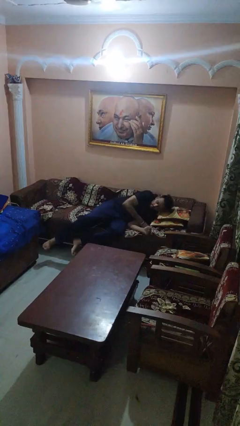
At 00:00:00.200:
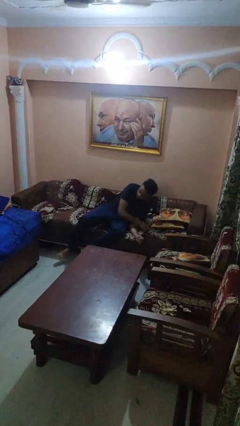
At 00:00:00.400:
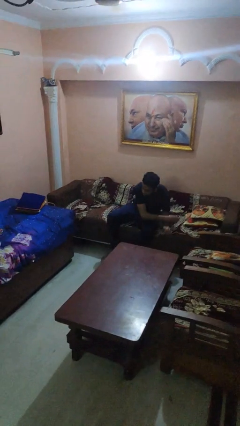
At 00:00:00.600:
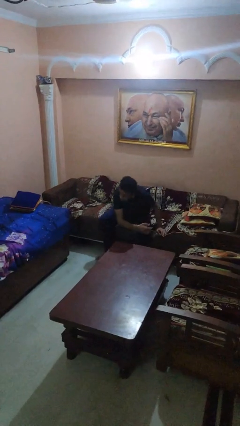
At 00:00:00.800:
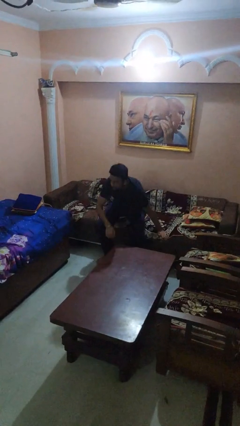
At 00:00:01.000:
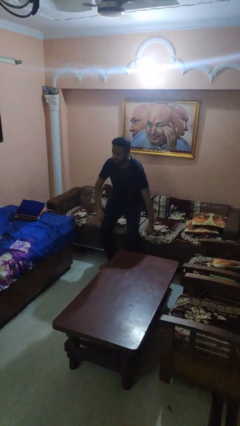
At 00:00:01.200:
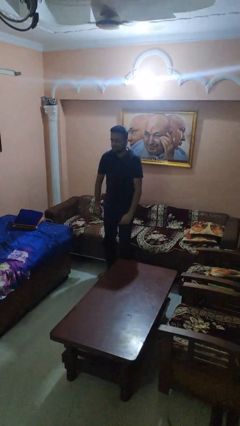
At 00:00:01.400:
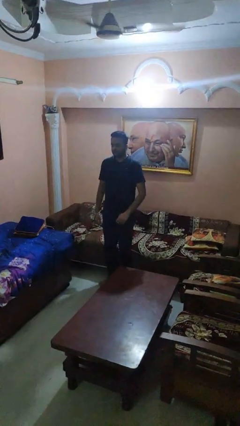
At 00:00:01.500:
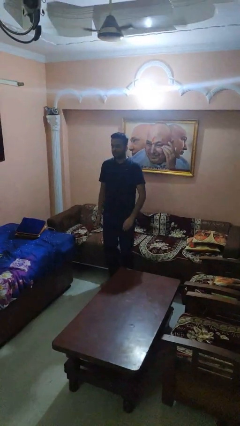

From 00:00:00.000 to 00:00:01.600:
person stands up

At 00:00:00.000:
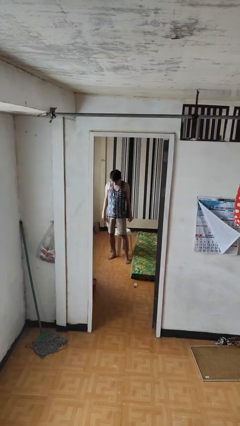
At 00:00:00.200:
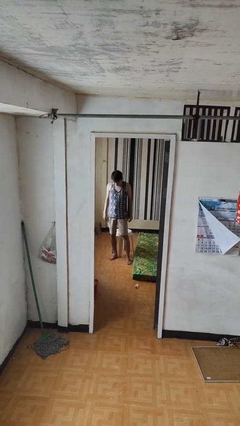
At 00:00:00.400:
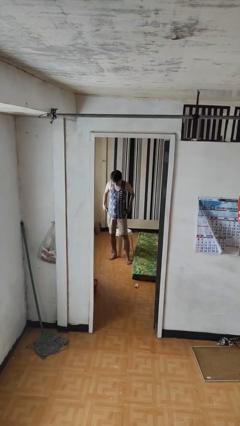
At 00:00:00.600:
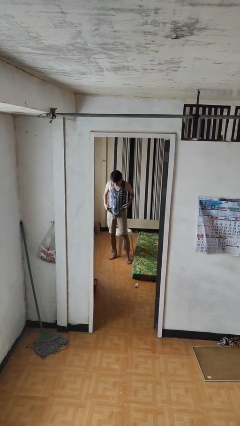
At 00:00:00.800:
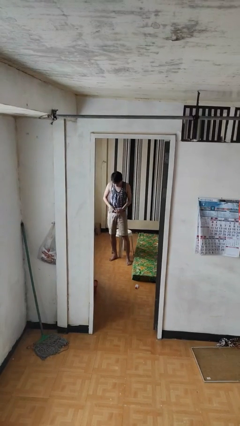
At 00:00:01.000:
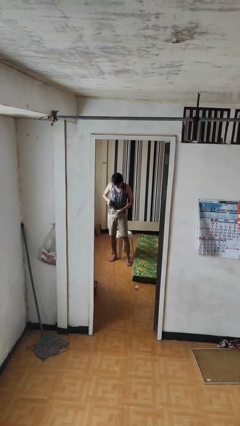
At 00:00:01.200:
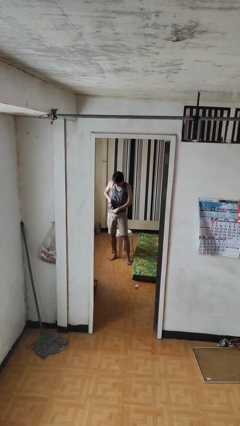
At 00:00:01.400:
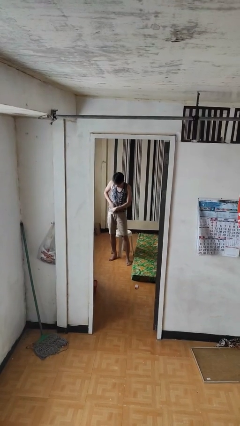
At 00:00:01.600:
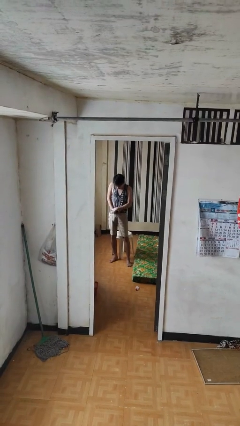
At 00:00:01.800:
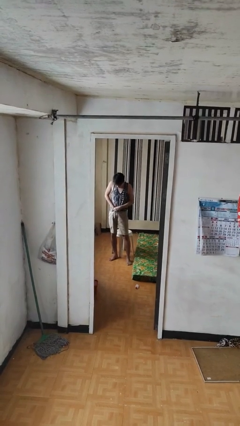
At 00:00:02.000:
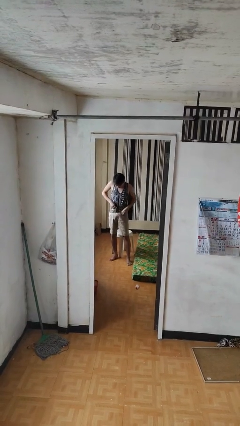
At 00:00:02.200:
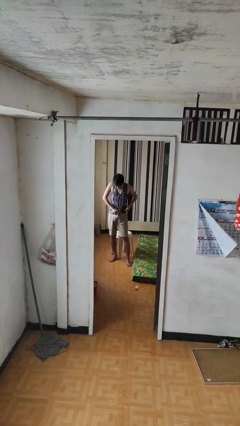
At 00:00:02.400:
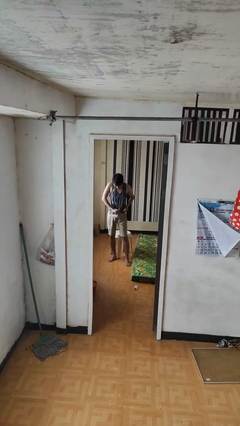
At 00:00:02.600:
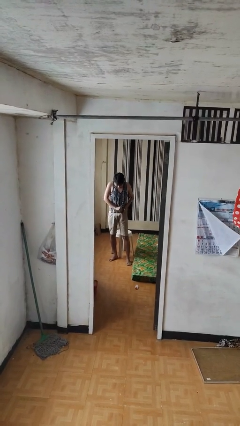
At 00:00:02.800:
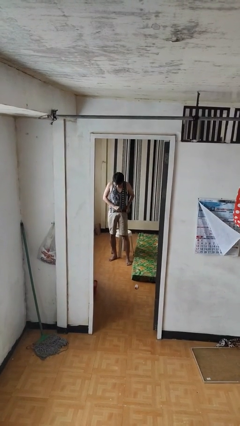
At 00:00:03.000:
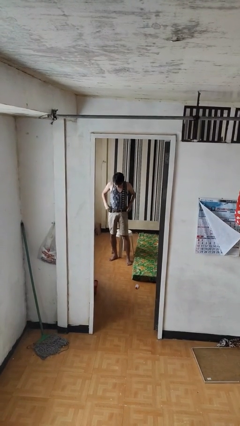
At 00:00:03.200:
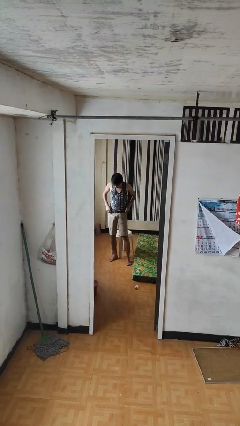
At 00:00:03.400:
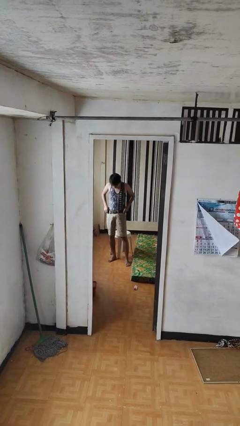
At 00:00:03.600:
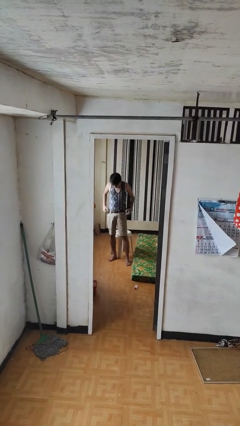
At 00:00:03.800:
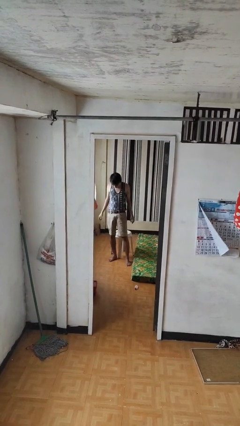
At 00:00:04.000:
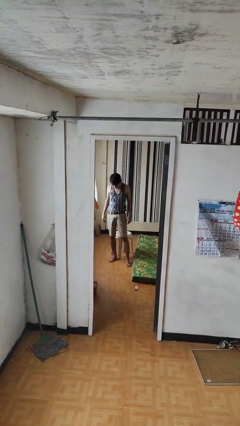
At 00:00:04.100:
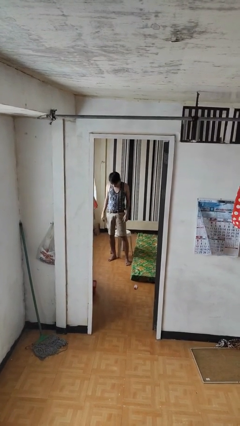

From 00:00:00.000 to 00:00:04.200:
person tucks in shirt

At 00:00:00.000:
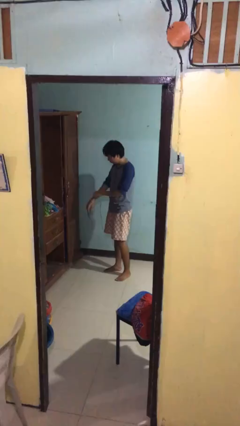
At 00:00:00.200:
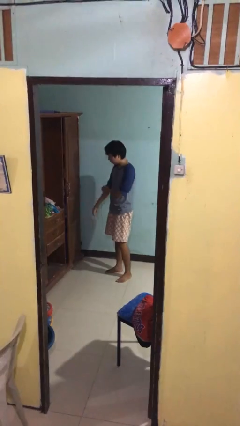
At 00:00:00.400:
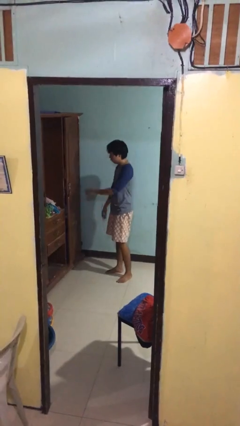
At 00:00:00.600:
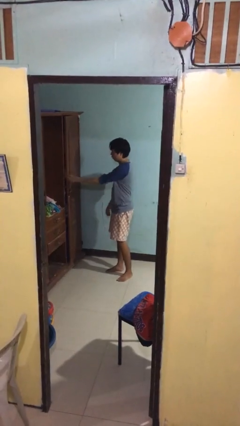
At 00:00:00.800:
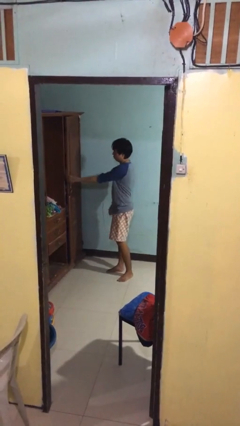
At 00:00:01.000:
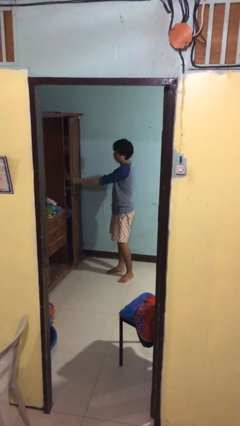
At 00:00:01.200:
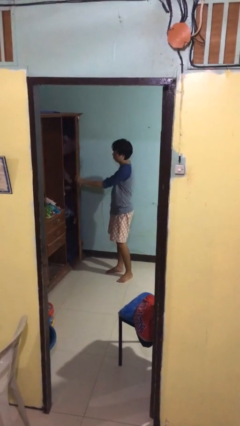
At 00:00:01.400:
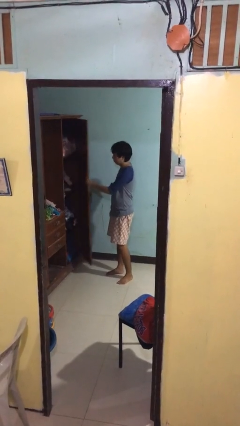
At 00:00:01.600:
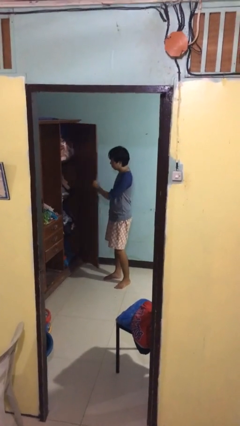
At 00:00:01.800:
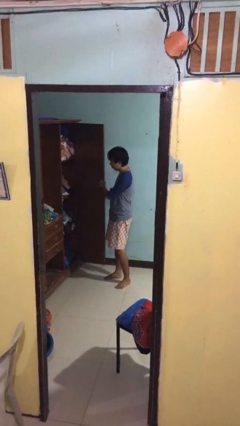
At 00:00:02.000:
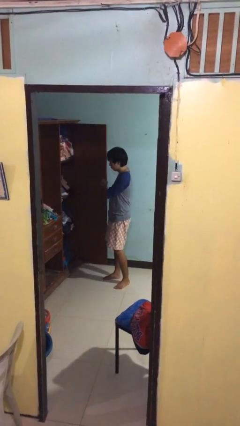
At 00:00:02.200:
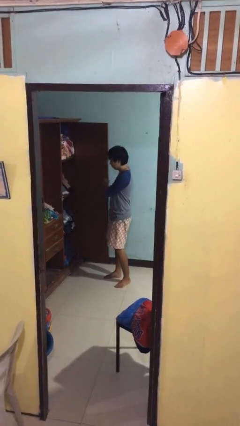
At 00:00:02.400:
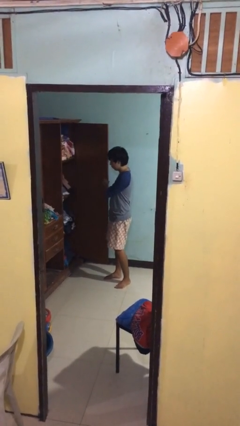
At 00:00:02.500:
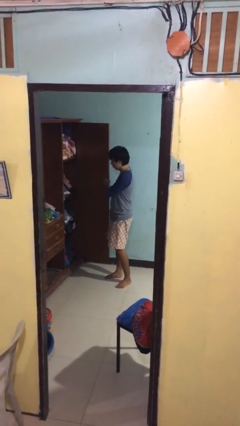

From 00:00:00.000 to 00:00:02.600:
person opens closet door

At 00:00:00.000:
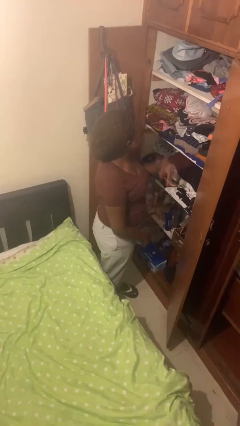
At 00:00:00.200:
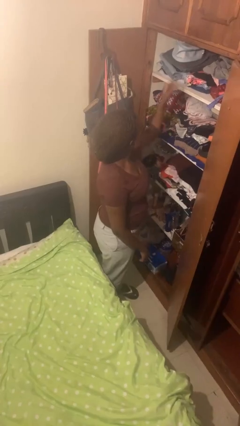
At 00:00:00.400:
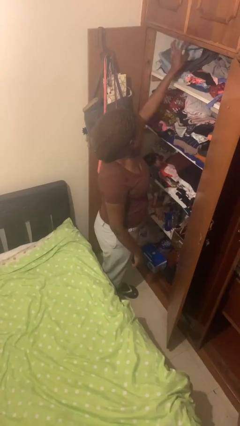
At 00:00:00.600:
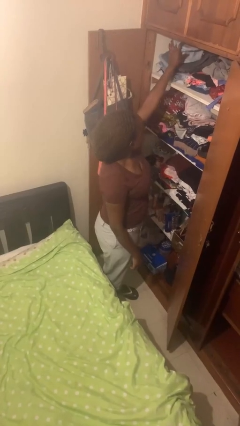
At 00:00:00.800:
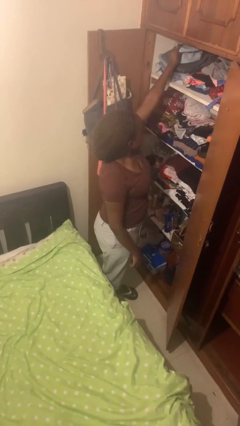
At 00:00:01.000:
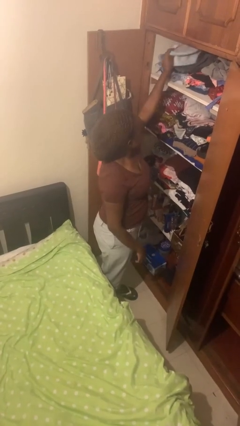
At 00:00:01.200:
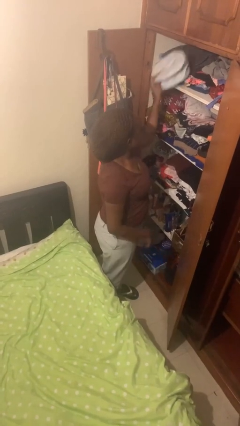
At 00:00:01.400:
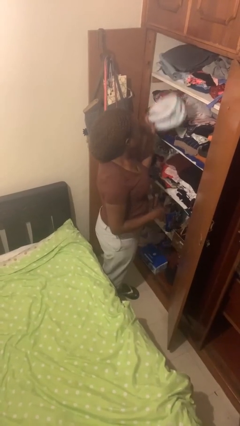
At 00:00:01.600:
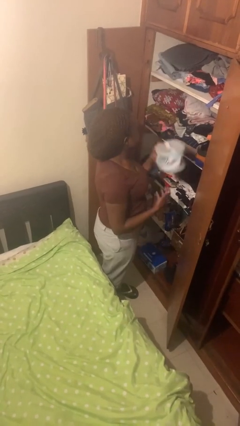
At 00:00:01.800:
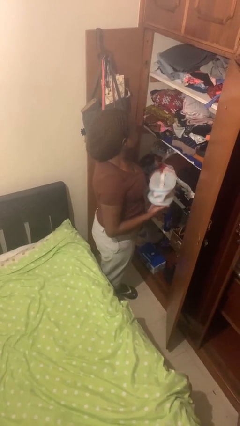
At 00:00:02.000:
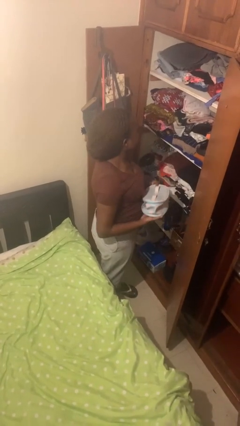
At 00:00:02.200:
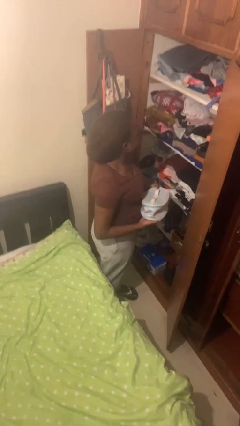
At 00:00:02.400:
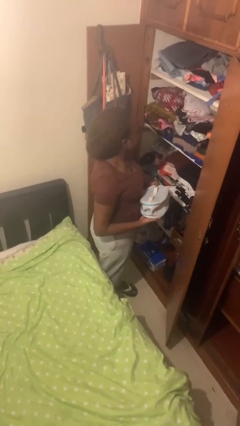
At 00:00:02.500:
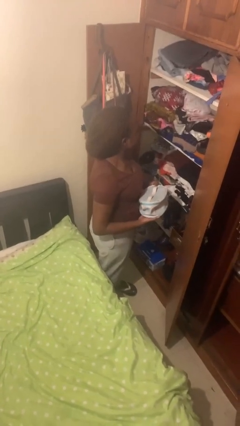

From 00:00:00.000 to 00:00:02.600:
person picks up object from shelf

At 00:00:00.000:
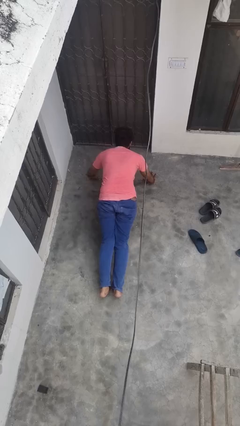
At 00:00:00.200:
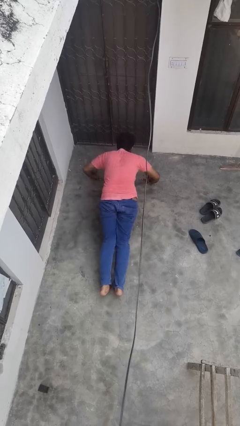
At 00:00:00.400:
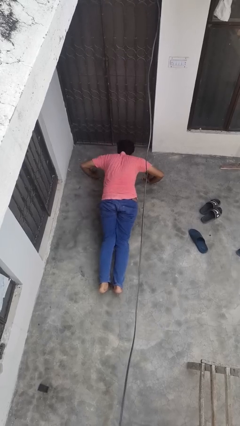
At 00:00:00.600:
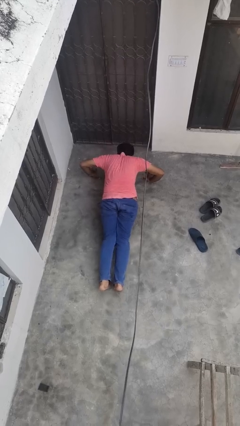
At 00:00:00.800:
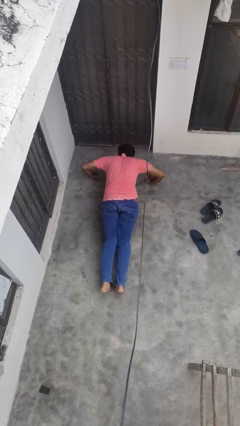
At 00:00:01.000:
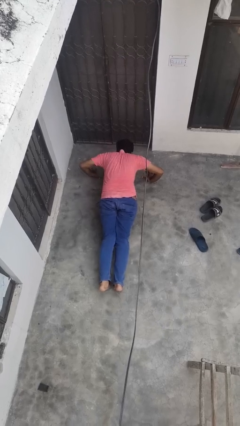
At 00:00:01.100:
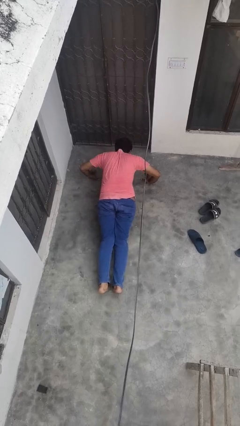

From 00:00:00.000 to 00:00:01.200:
person exercises with pushup

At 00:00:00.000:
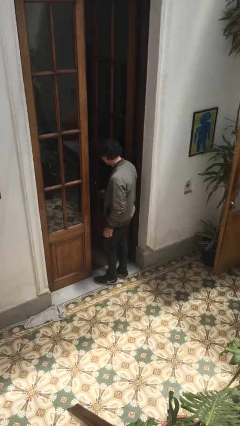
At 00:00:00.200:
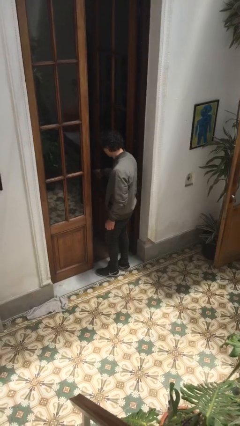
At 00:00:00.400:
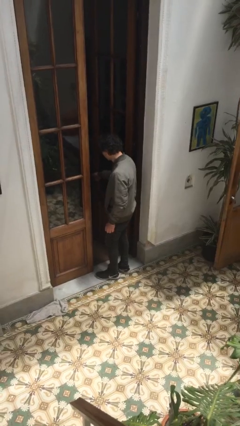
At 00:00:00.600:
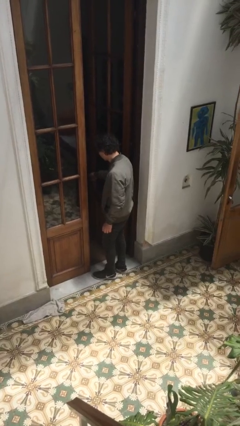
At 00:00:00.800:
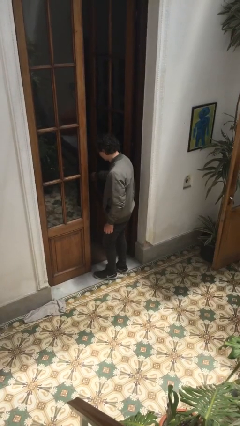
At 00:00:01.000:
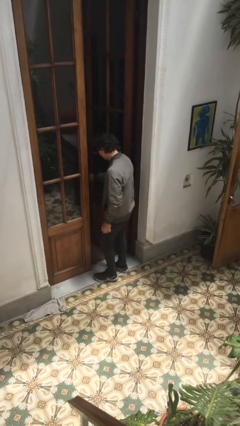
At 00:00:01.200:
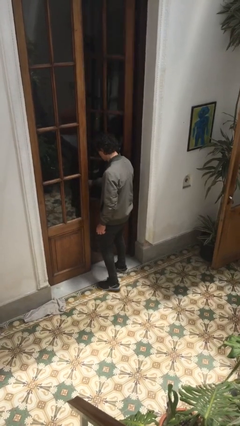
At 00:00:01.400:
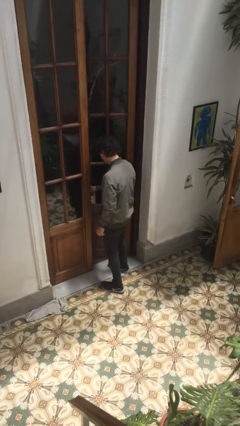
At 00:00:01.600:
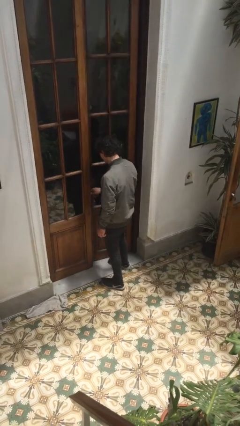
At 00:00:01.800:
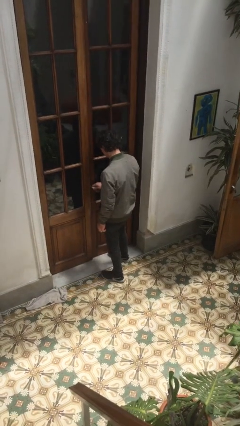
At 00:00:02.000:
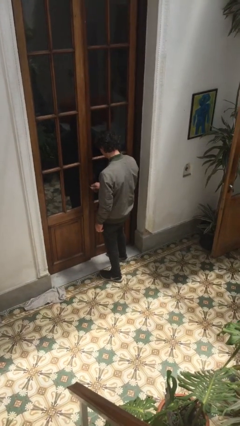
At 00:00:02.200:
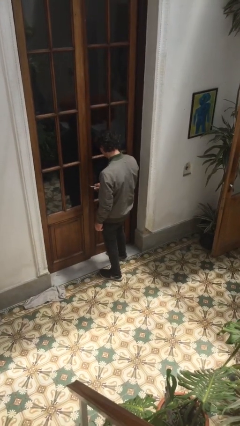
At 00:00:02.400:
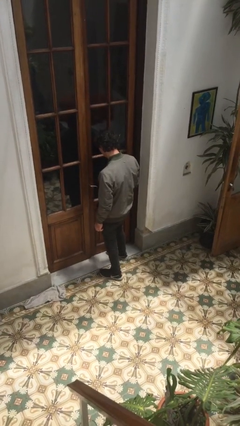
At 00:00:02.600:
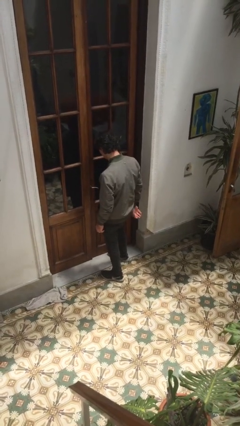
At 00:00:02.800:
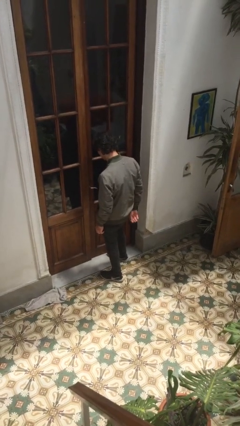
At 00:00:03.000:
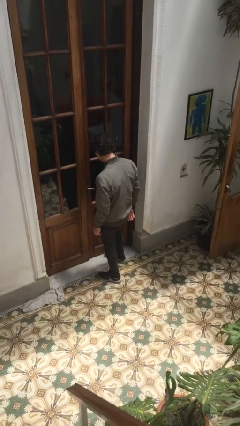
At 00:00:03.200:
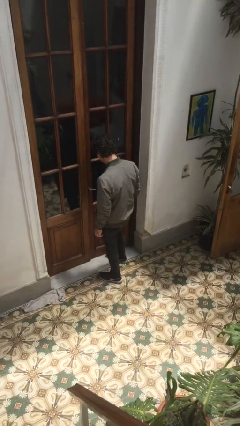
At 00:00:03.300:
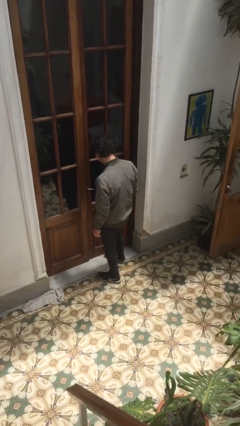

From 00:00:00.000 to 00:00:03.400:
person closes facility door

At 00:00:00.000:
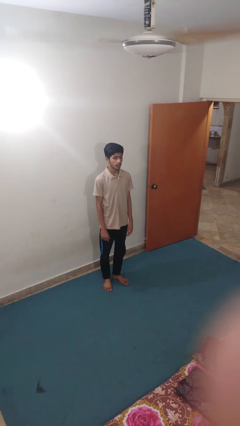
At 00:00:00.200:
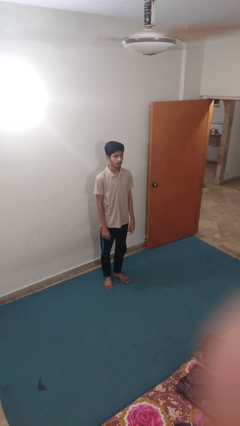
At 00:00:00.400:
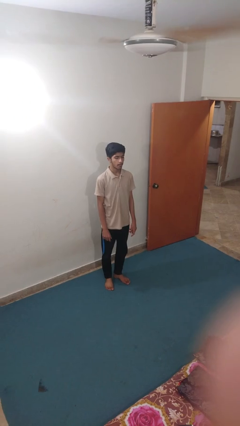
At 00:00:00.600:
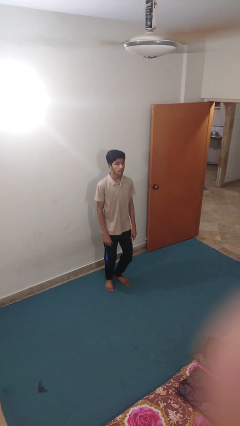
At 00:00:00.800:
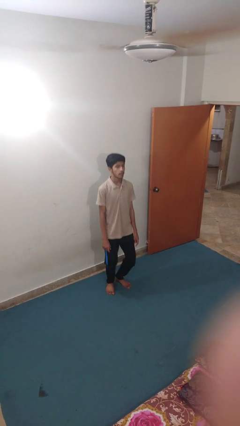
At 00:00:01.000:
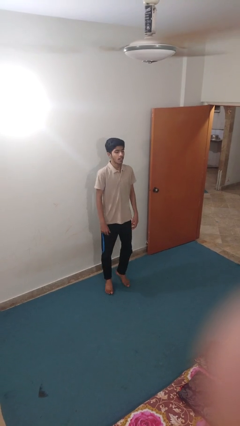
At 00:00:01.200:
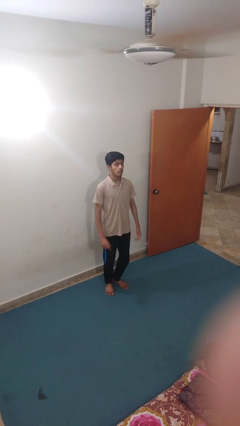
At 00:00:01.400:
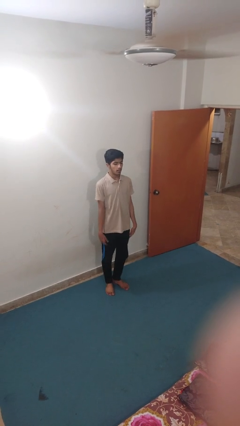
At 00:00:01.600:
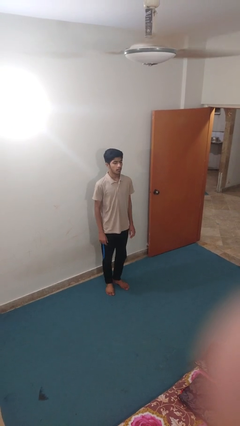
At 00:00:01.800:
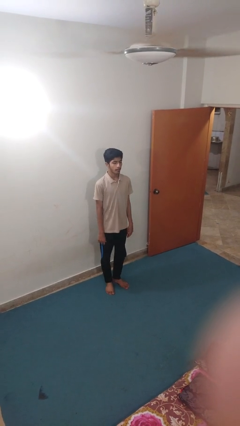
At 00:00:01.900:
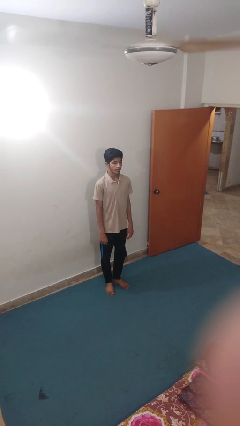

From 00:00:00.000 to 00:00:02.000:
person jumps
